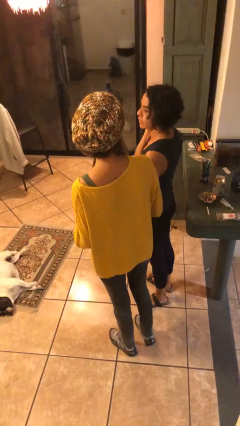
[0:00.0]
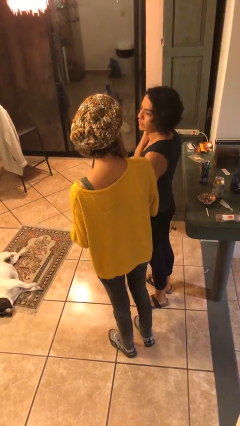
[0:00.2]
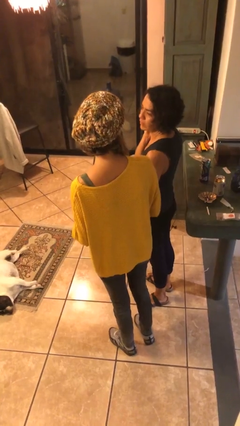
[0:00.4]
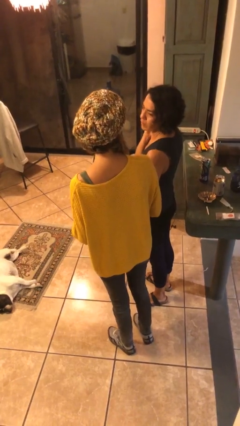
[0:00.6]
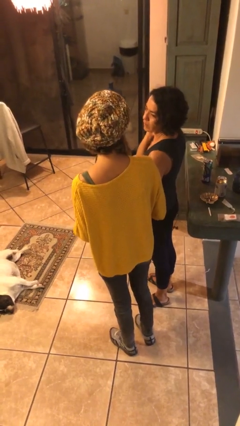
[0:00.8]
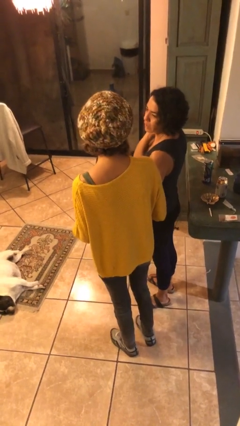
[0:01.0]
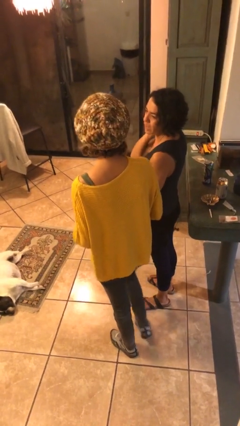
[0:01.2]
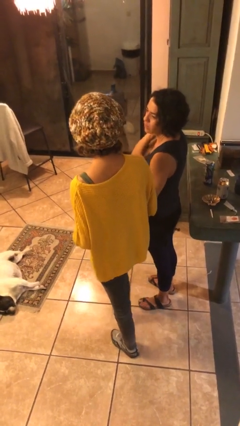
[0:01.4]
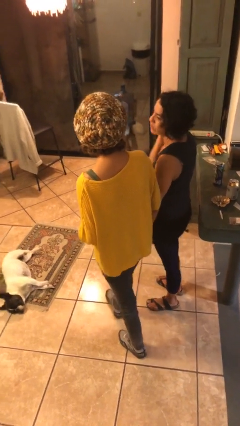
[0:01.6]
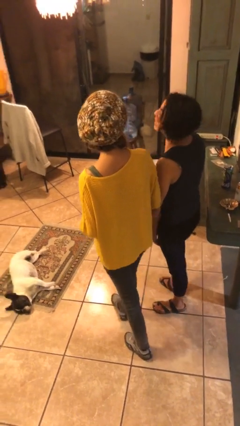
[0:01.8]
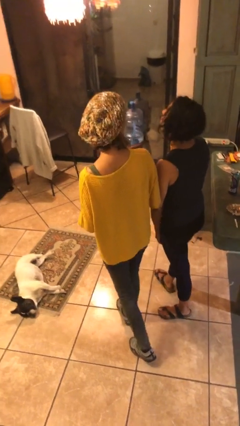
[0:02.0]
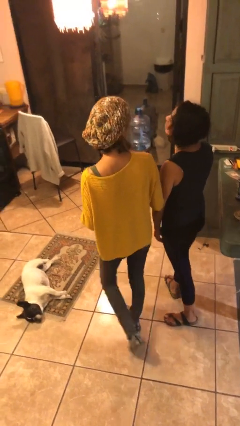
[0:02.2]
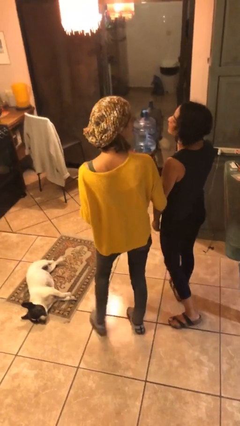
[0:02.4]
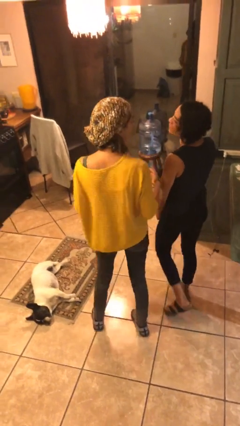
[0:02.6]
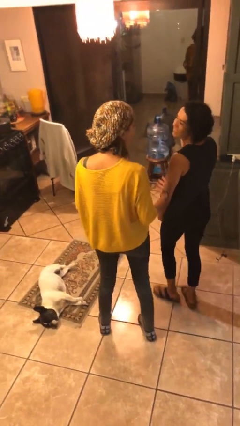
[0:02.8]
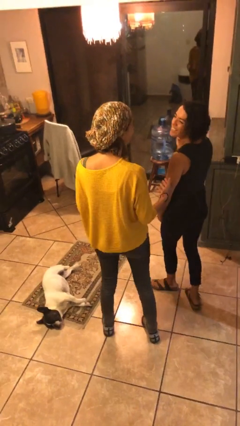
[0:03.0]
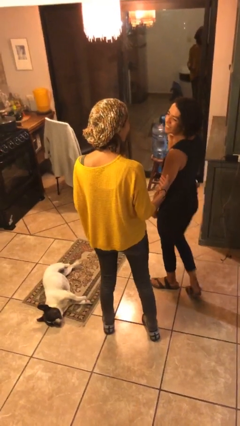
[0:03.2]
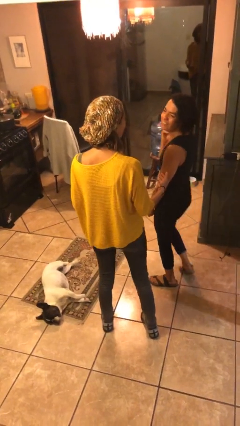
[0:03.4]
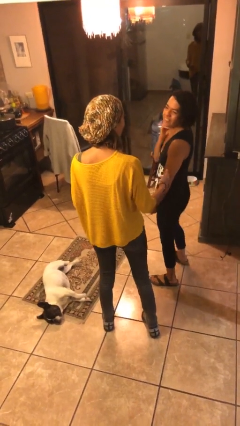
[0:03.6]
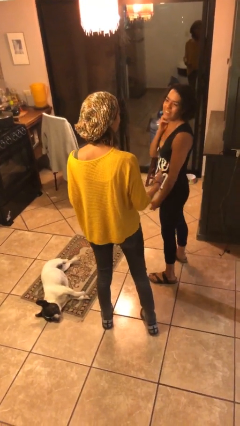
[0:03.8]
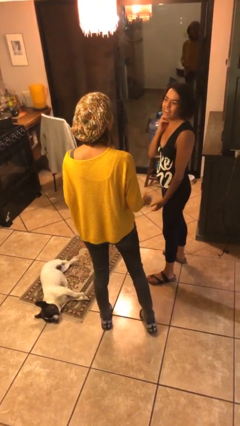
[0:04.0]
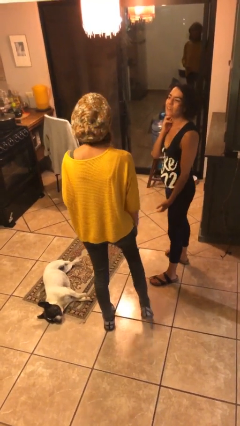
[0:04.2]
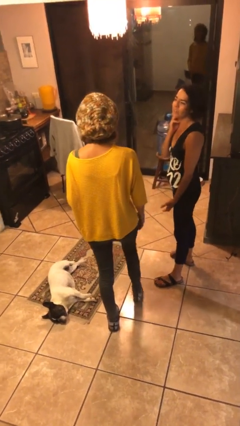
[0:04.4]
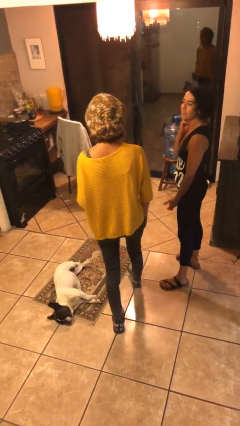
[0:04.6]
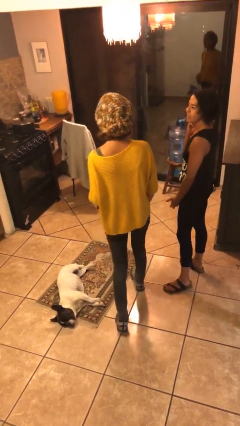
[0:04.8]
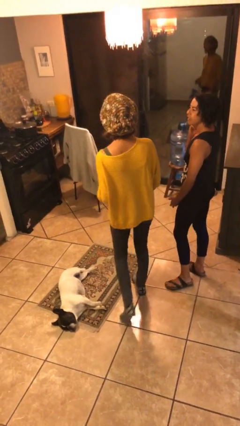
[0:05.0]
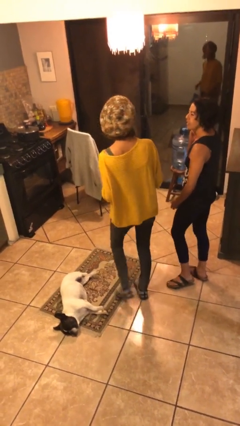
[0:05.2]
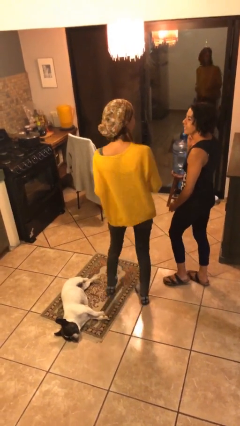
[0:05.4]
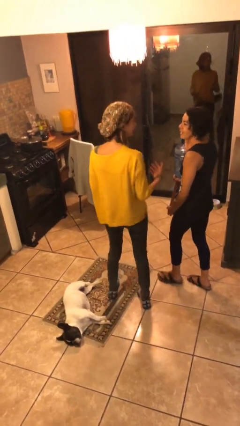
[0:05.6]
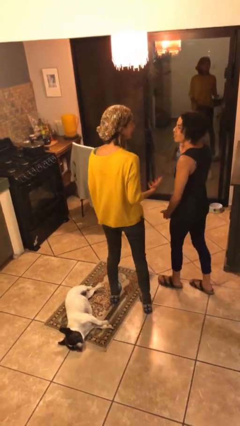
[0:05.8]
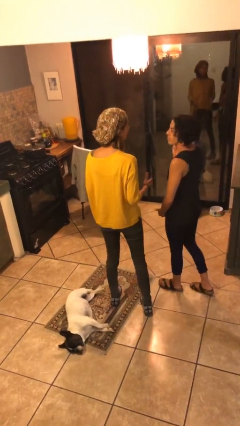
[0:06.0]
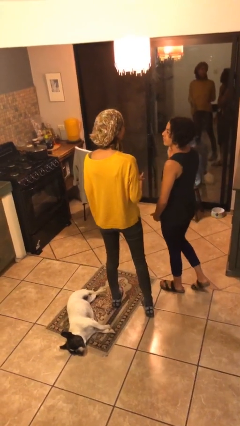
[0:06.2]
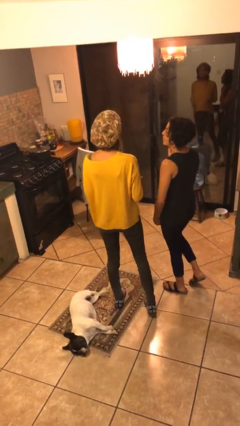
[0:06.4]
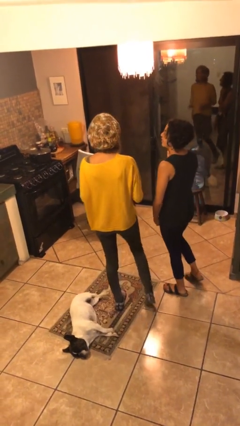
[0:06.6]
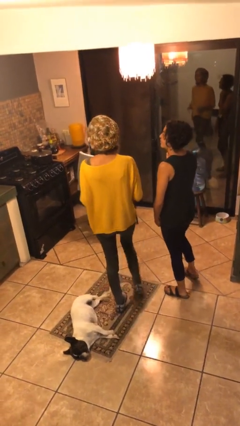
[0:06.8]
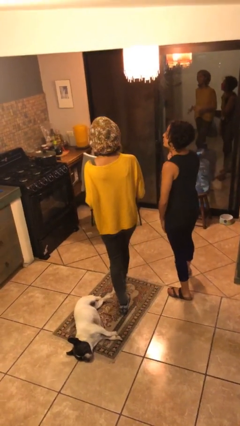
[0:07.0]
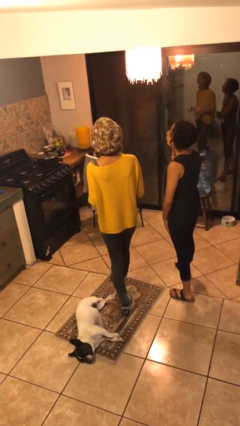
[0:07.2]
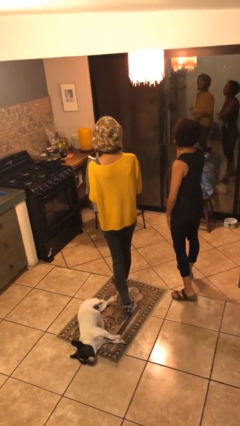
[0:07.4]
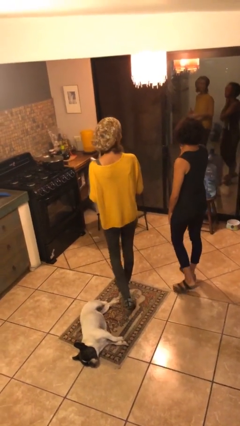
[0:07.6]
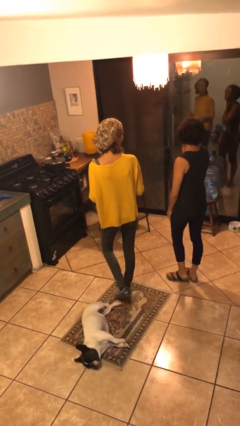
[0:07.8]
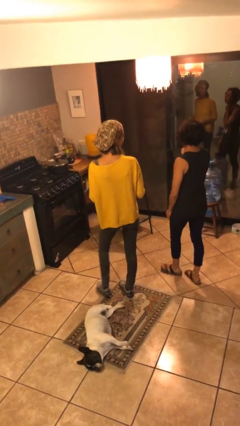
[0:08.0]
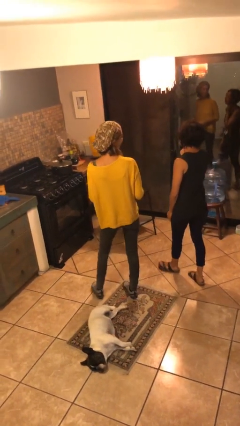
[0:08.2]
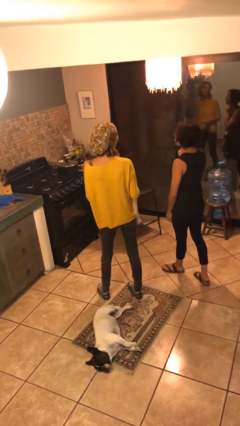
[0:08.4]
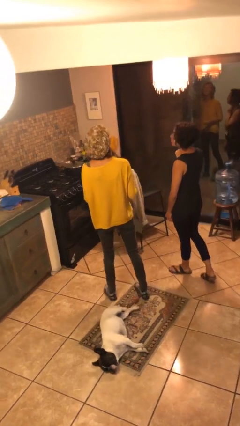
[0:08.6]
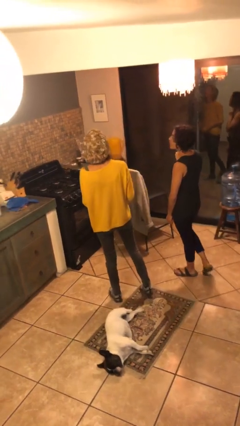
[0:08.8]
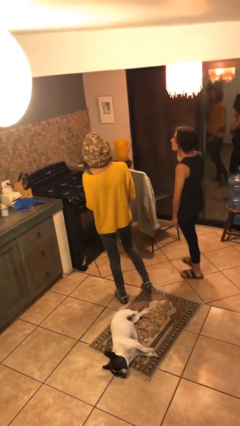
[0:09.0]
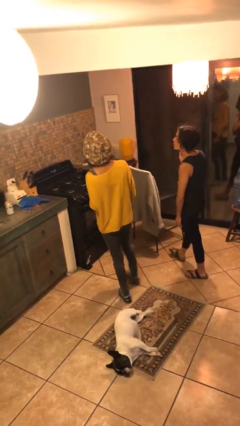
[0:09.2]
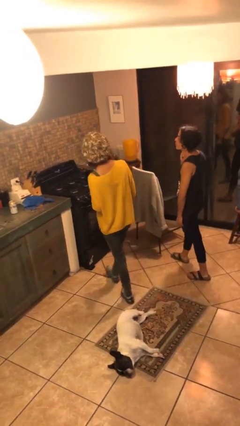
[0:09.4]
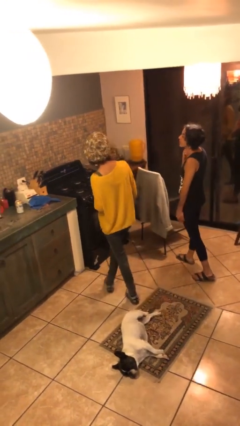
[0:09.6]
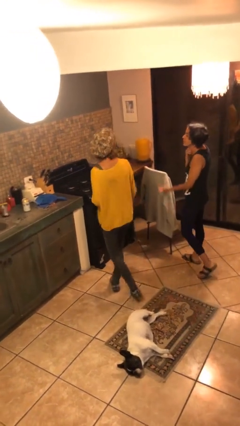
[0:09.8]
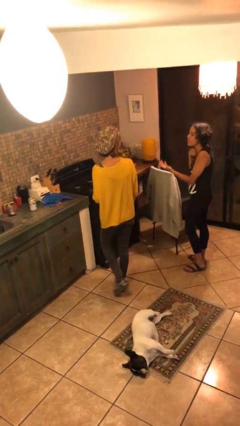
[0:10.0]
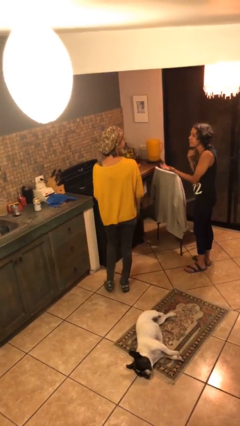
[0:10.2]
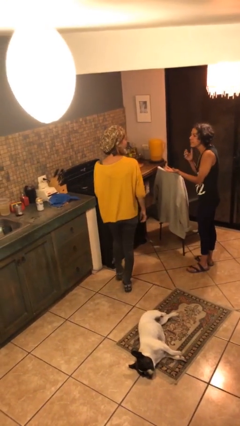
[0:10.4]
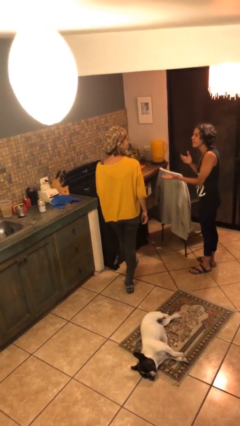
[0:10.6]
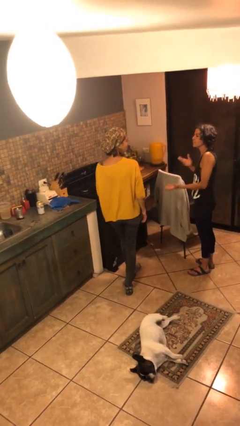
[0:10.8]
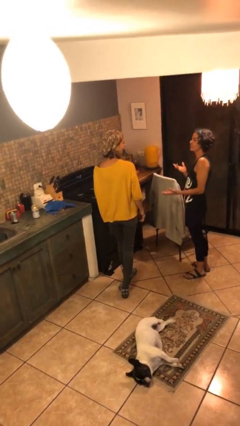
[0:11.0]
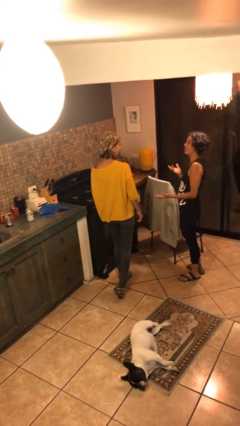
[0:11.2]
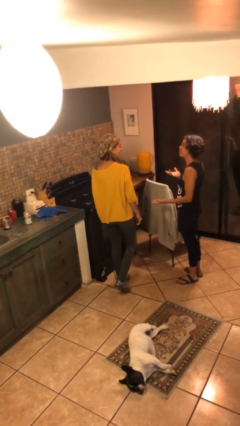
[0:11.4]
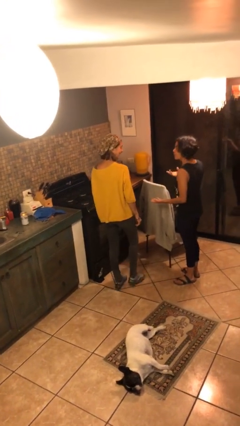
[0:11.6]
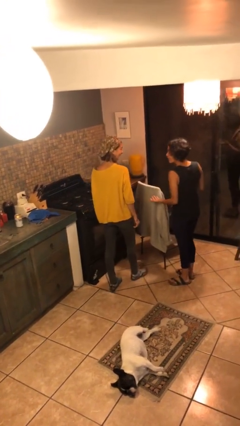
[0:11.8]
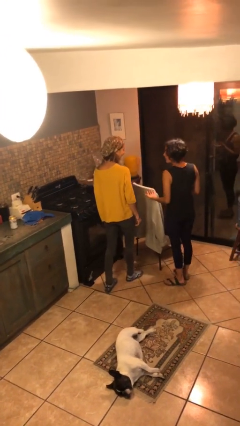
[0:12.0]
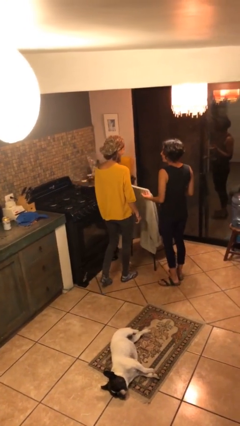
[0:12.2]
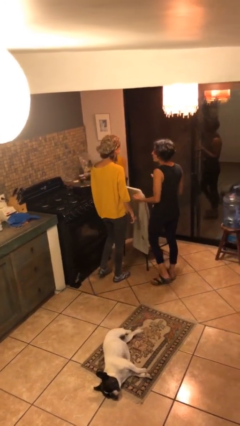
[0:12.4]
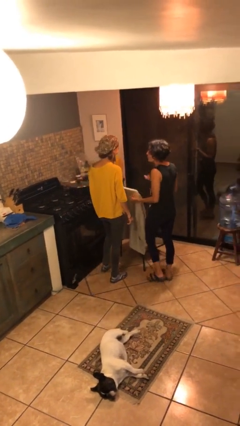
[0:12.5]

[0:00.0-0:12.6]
person talks to person

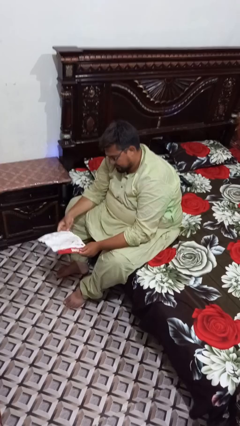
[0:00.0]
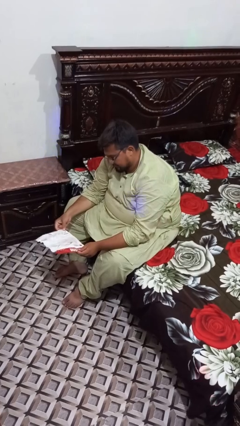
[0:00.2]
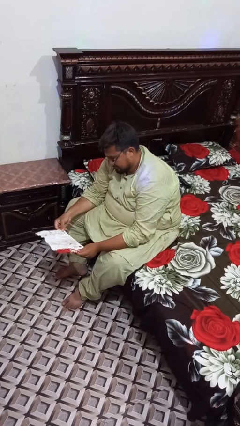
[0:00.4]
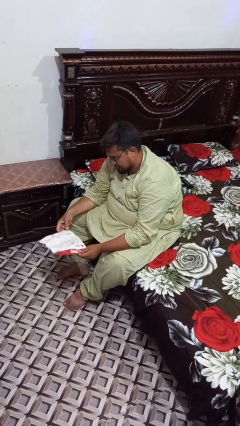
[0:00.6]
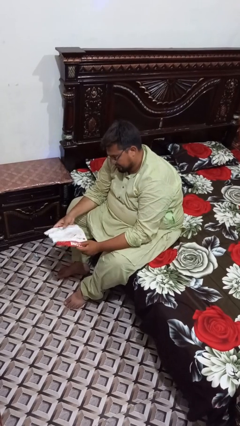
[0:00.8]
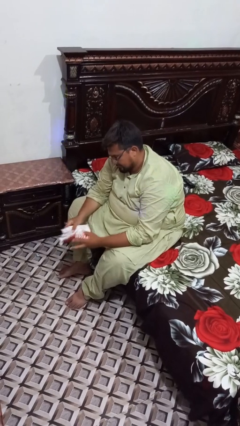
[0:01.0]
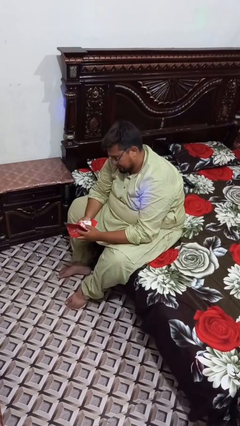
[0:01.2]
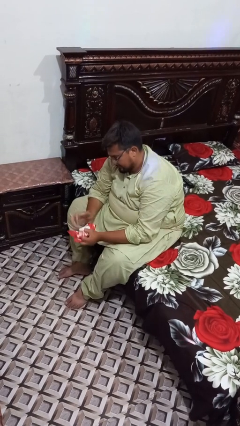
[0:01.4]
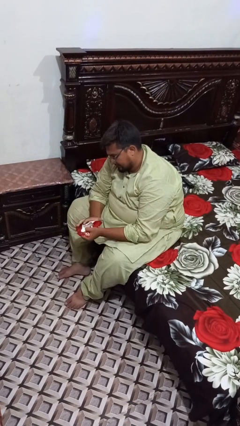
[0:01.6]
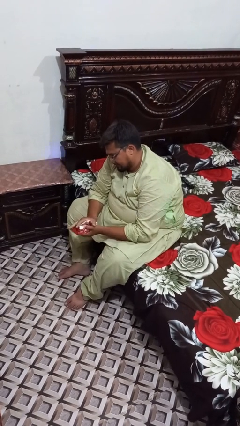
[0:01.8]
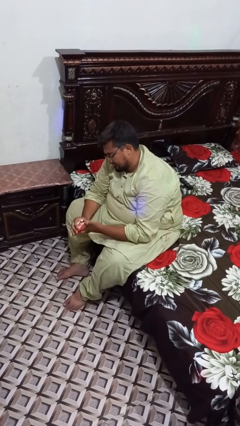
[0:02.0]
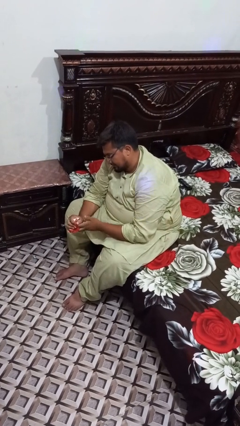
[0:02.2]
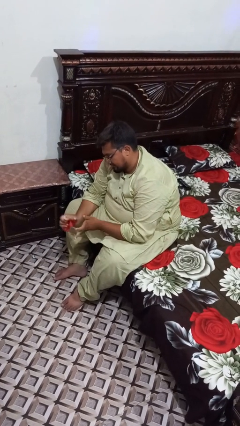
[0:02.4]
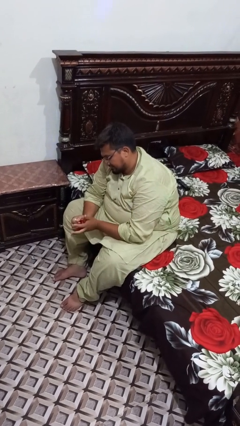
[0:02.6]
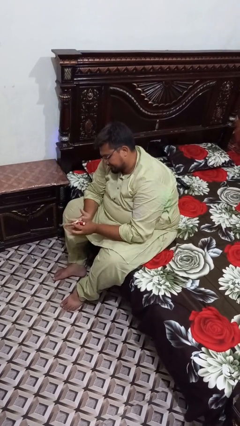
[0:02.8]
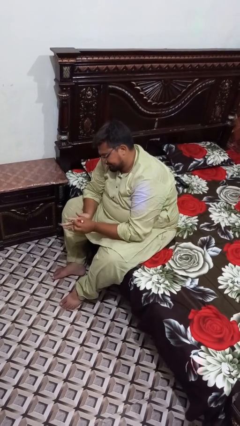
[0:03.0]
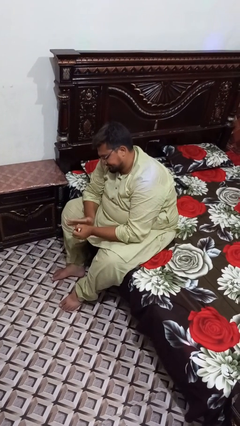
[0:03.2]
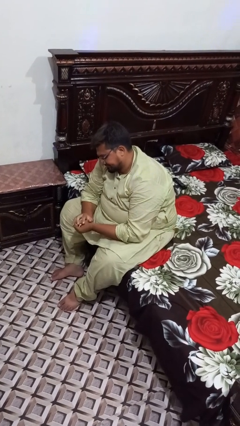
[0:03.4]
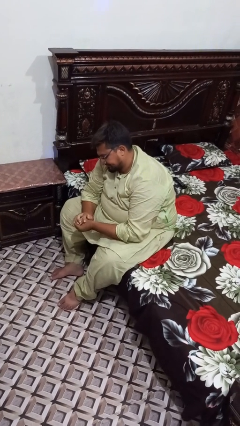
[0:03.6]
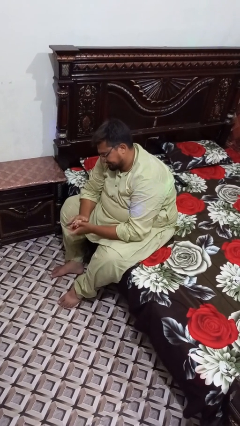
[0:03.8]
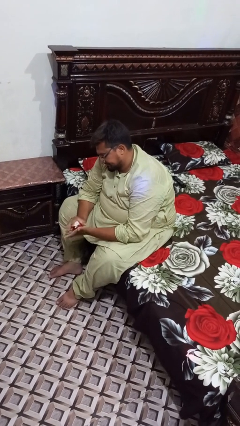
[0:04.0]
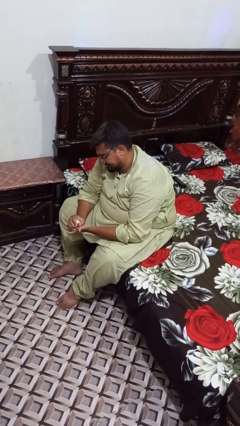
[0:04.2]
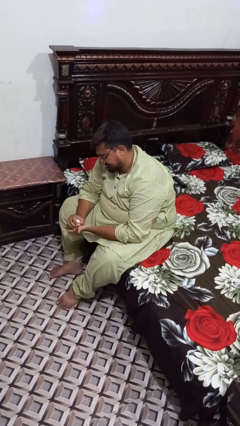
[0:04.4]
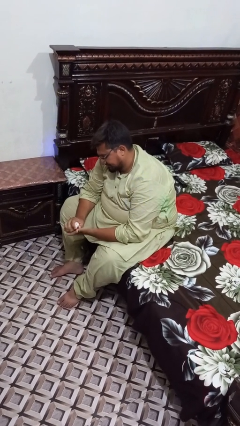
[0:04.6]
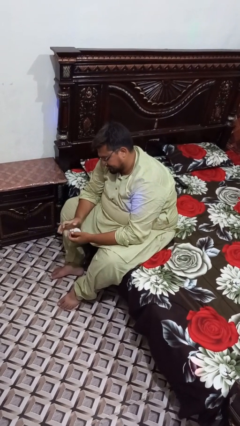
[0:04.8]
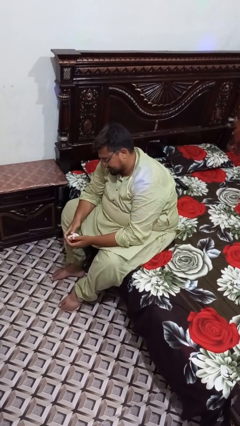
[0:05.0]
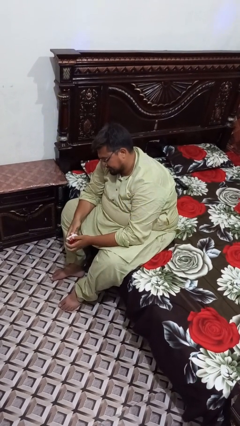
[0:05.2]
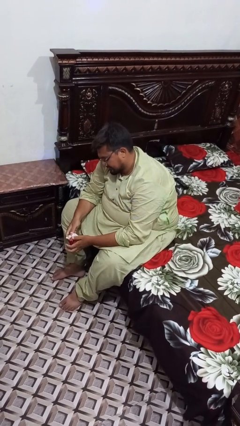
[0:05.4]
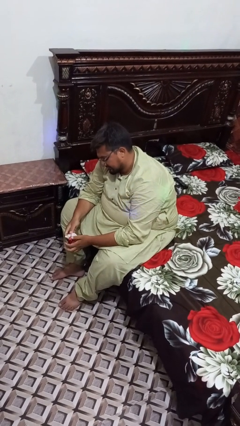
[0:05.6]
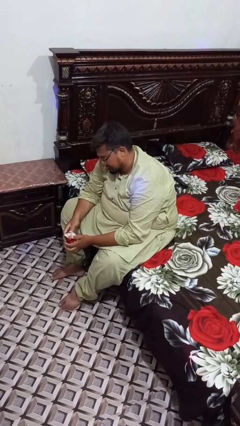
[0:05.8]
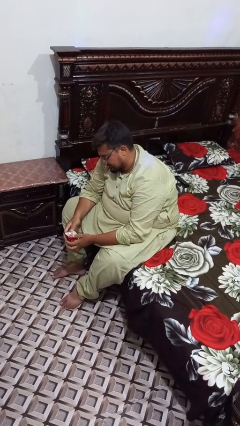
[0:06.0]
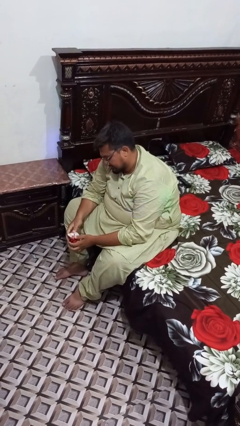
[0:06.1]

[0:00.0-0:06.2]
person crumples paper
